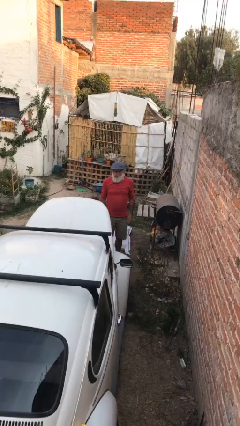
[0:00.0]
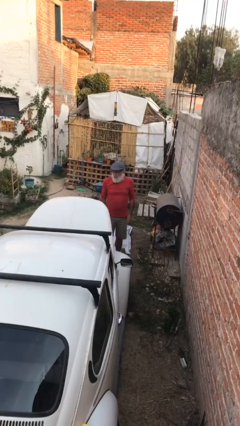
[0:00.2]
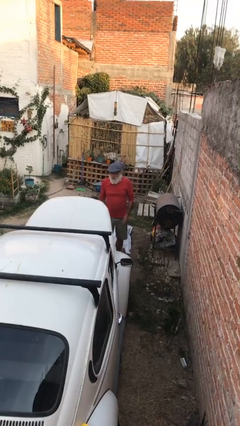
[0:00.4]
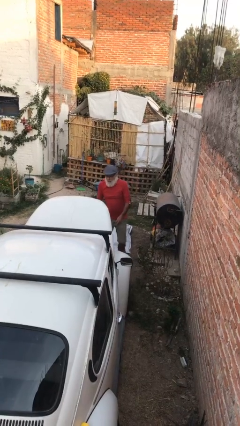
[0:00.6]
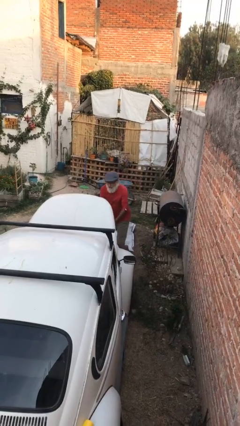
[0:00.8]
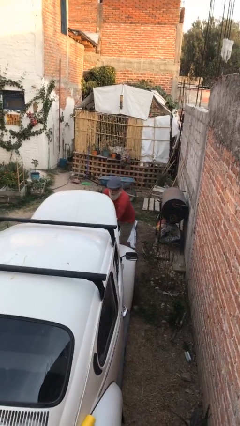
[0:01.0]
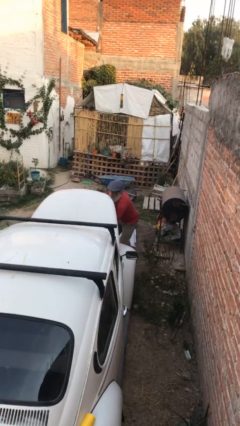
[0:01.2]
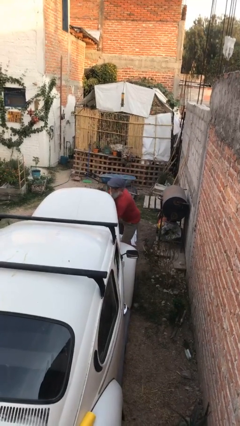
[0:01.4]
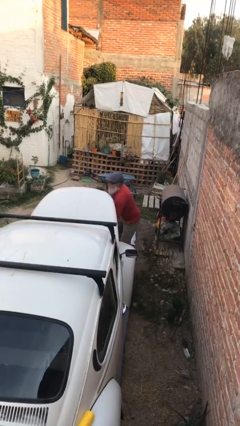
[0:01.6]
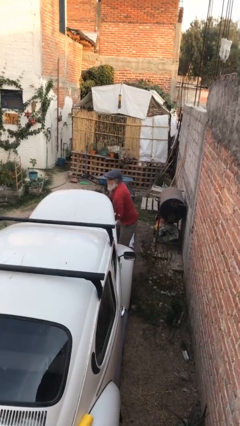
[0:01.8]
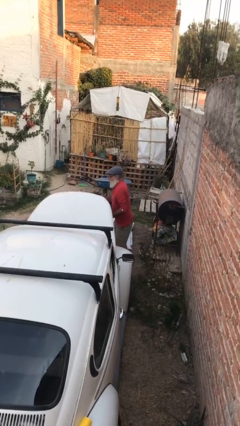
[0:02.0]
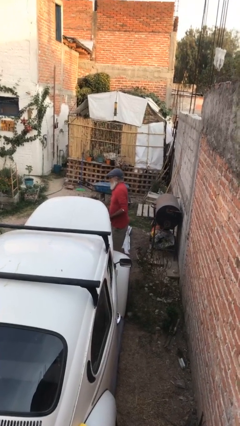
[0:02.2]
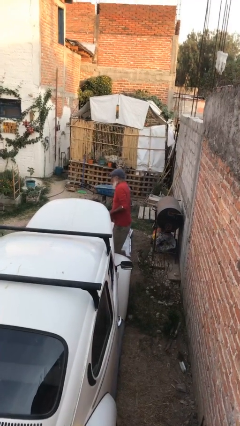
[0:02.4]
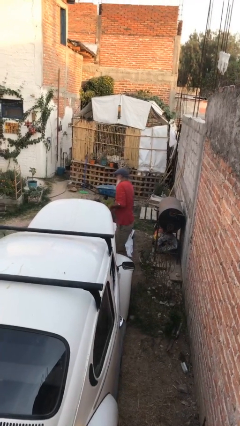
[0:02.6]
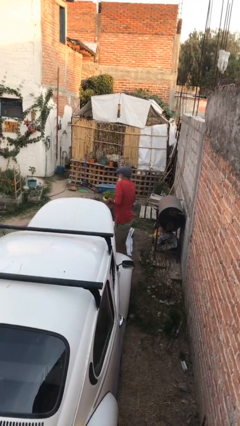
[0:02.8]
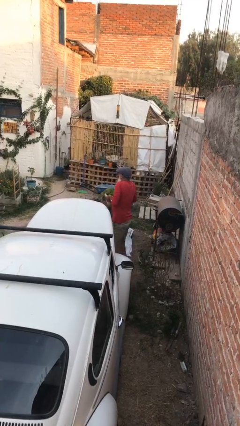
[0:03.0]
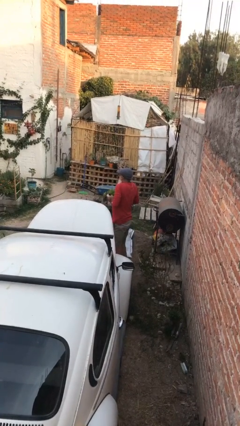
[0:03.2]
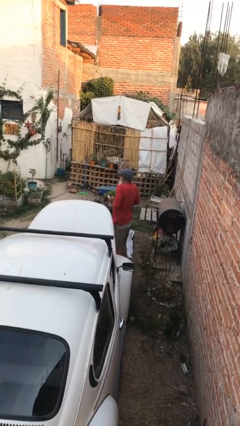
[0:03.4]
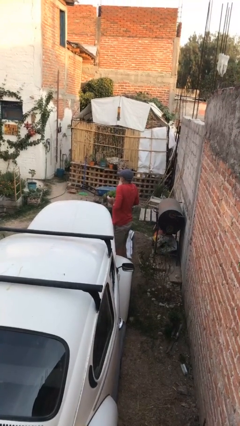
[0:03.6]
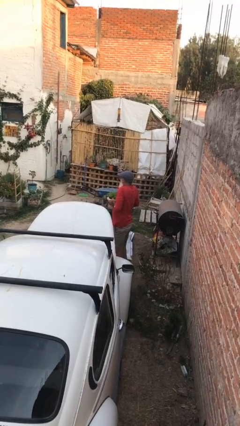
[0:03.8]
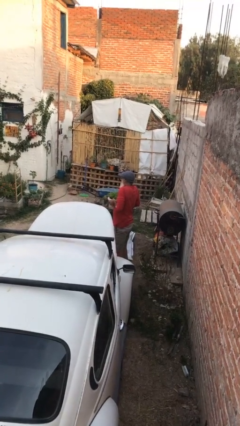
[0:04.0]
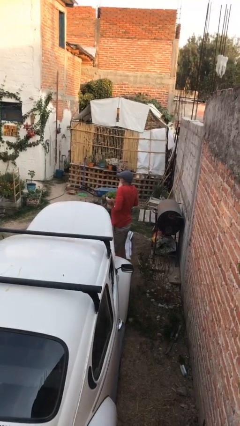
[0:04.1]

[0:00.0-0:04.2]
person unloads car

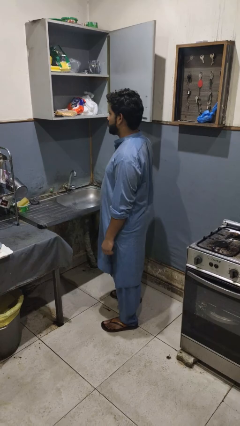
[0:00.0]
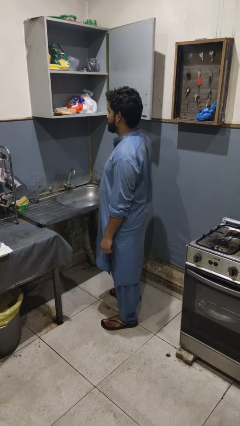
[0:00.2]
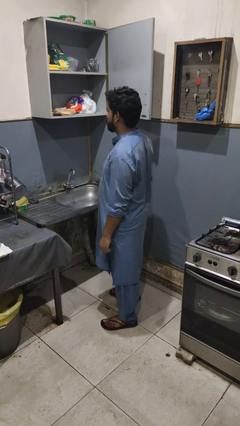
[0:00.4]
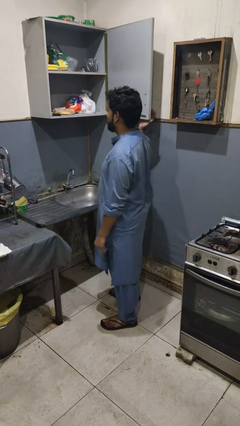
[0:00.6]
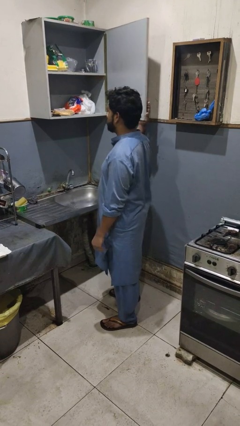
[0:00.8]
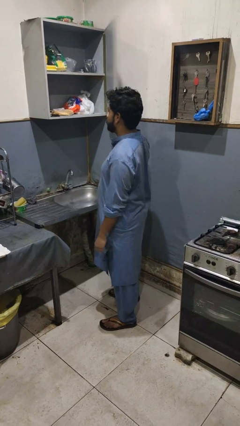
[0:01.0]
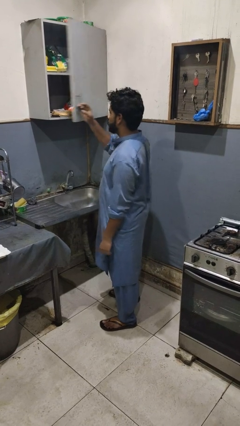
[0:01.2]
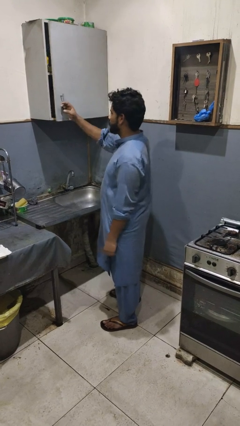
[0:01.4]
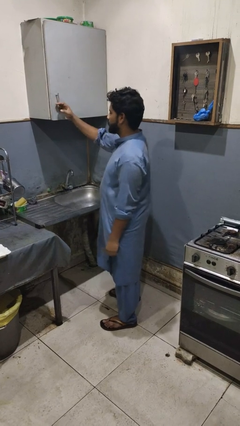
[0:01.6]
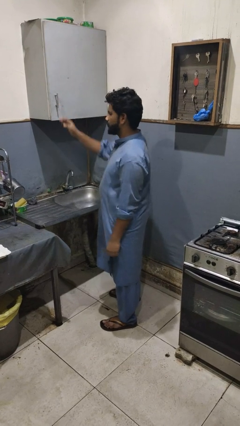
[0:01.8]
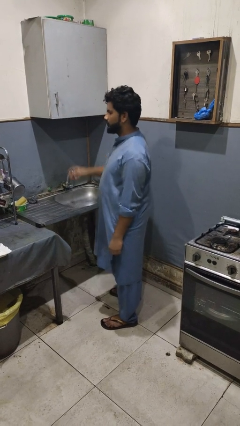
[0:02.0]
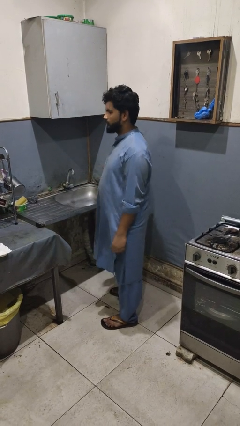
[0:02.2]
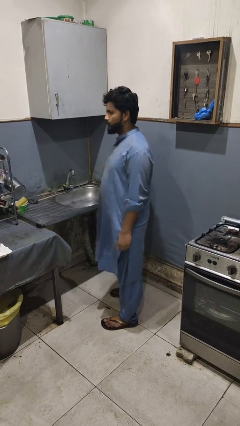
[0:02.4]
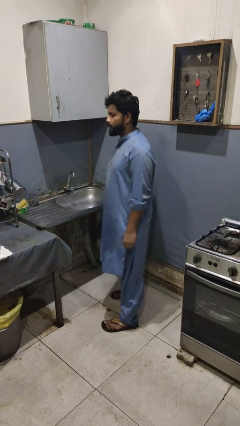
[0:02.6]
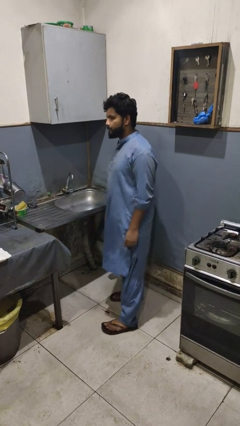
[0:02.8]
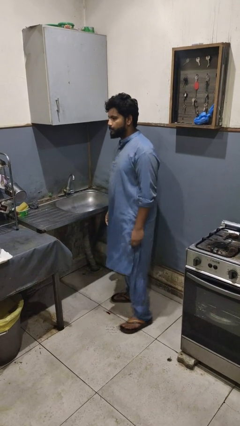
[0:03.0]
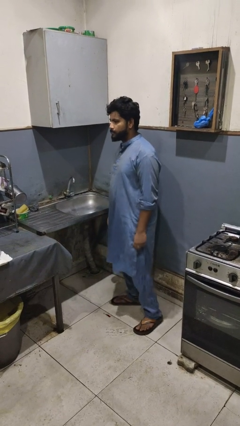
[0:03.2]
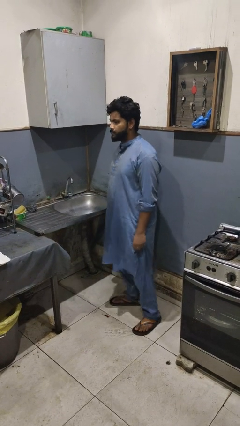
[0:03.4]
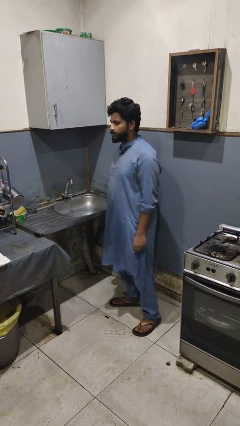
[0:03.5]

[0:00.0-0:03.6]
person closes cabinet

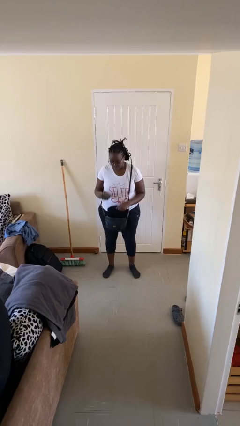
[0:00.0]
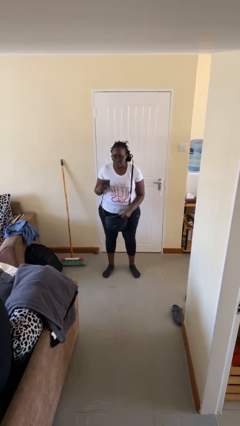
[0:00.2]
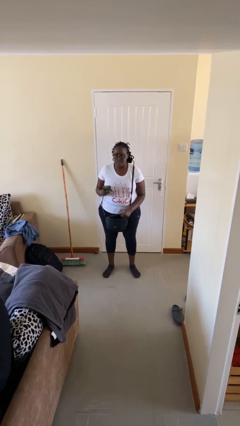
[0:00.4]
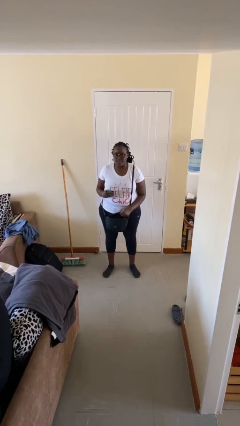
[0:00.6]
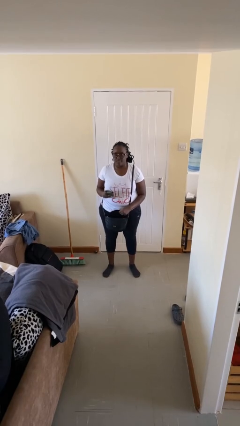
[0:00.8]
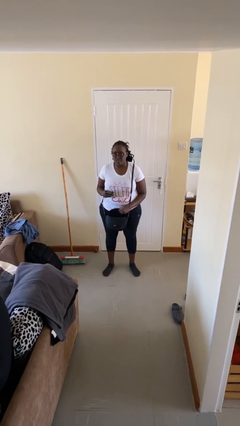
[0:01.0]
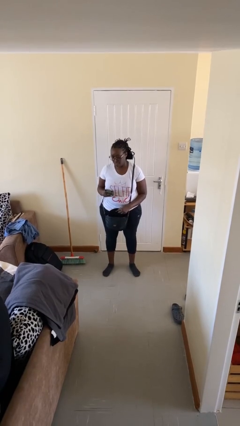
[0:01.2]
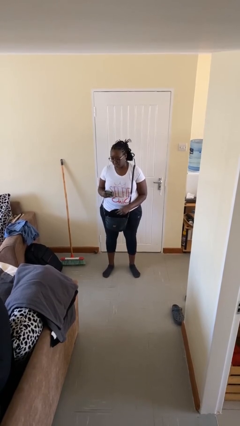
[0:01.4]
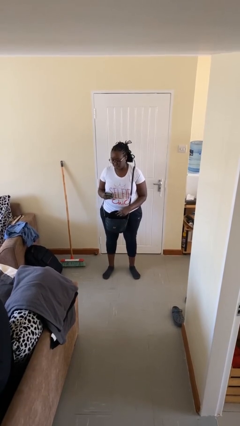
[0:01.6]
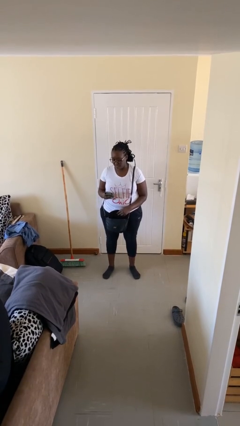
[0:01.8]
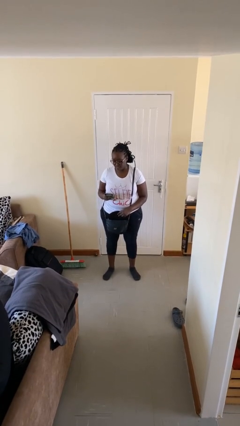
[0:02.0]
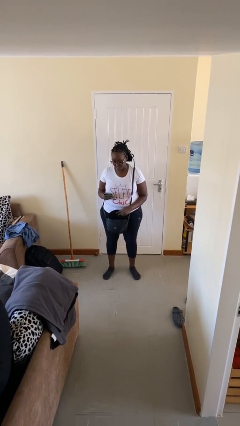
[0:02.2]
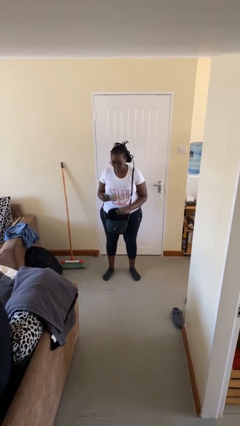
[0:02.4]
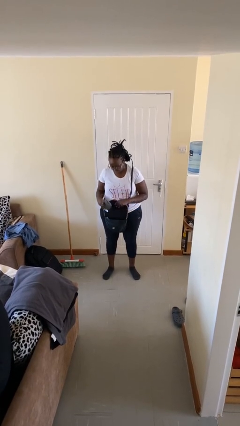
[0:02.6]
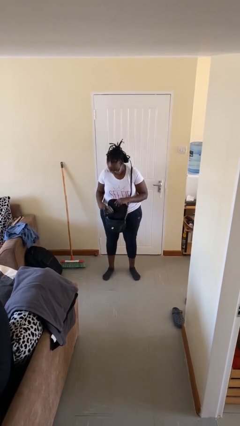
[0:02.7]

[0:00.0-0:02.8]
person takes object from purse

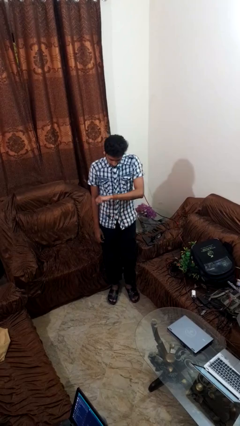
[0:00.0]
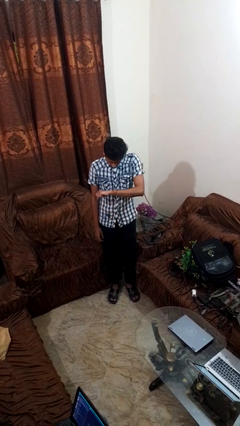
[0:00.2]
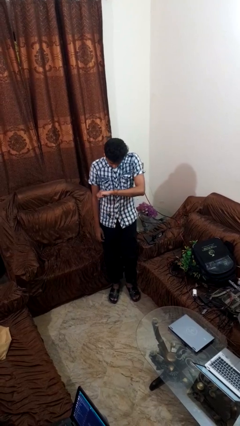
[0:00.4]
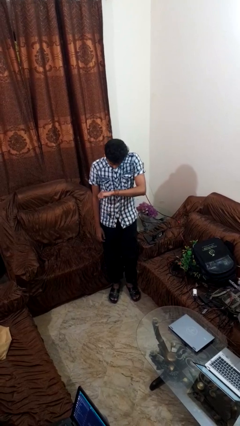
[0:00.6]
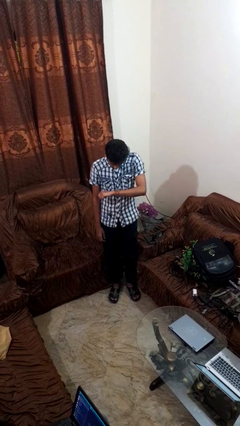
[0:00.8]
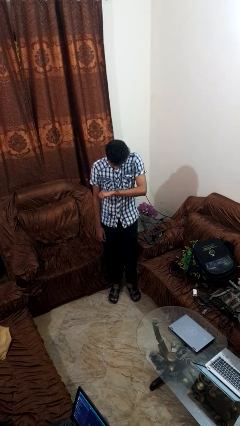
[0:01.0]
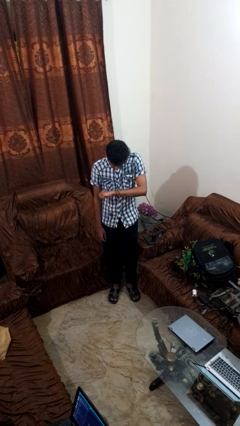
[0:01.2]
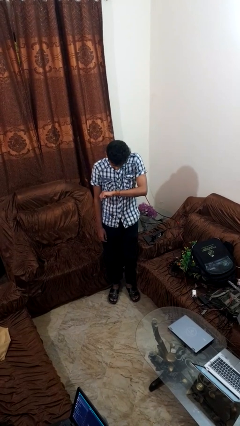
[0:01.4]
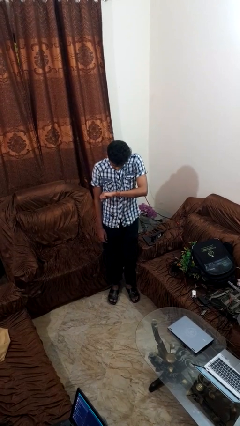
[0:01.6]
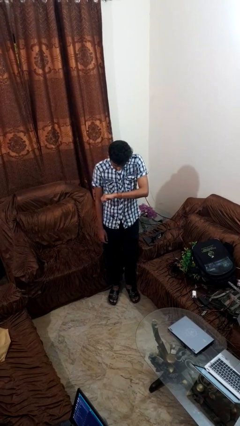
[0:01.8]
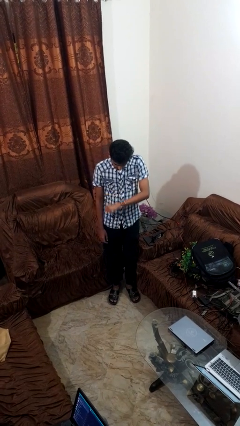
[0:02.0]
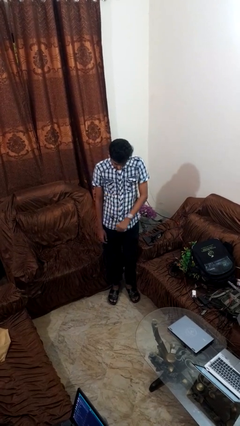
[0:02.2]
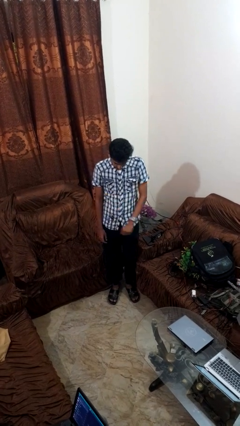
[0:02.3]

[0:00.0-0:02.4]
person looks at wristwatch

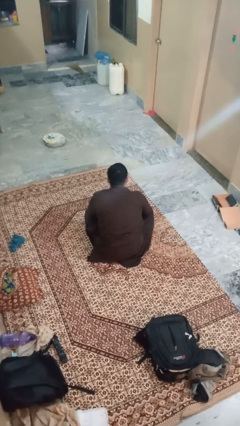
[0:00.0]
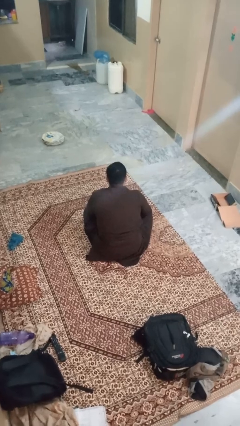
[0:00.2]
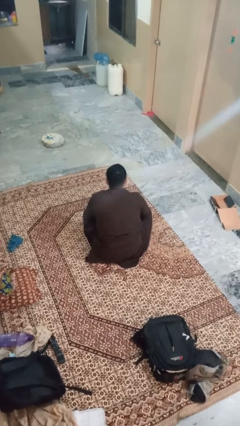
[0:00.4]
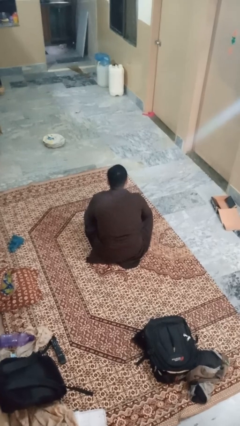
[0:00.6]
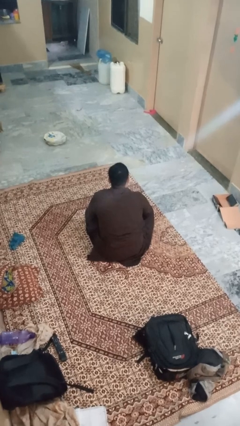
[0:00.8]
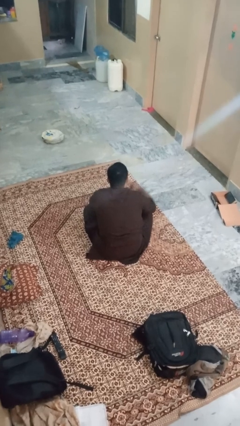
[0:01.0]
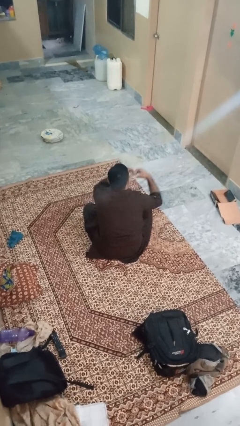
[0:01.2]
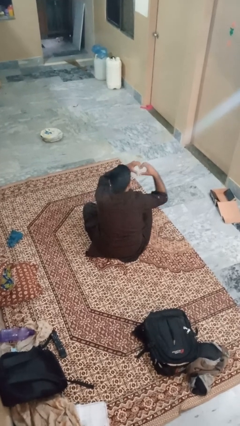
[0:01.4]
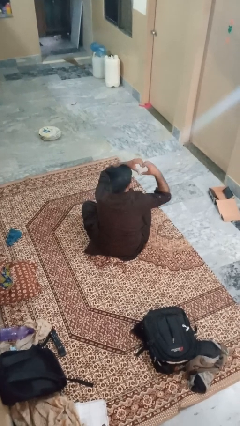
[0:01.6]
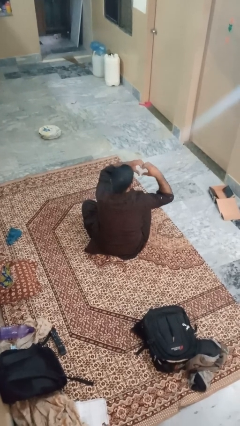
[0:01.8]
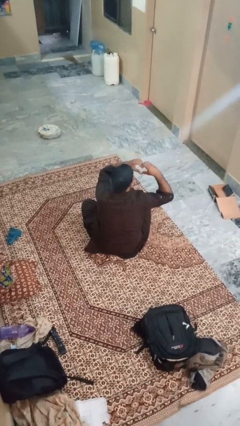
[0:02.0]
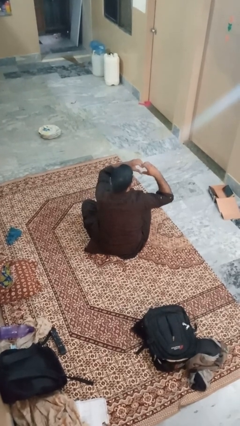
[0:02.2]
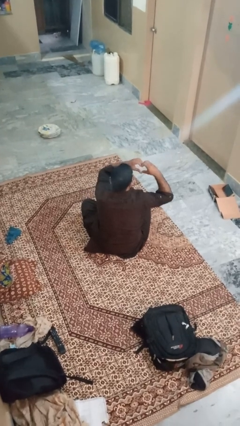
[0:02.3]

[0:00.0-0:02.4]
person gestures heart

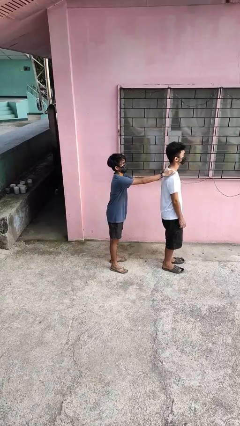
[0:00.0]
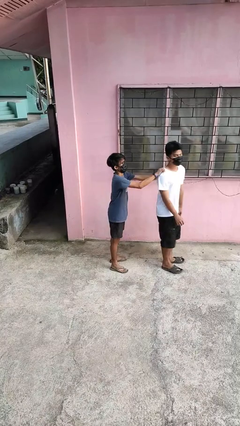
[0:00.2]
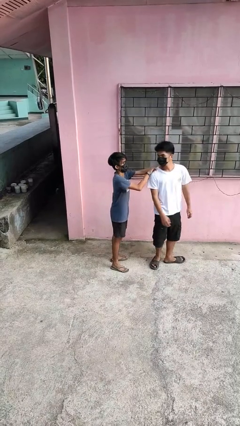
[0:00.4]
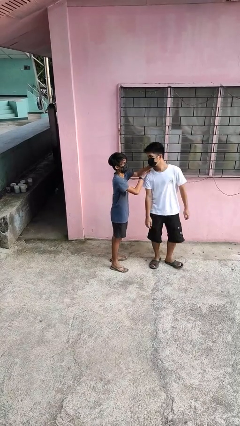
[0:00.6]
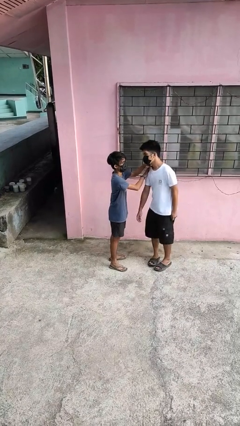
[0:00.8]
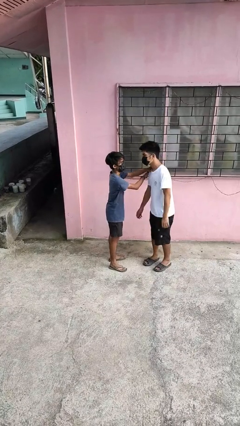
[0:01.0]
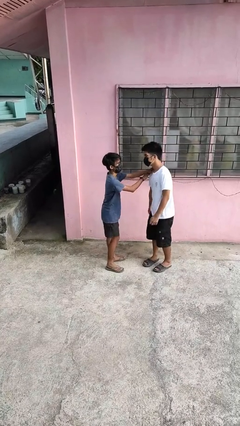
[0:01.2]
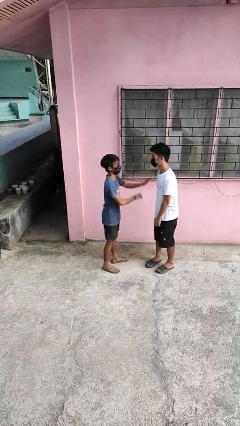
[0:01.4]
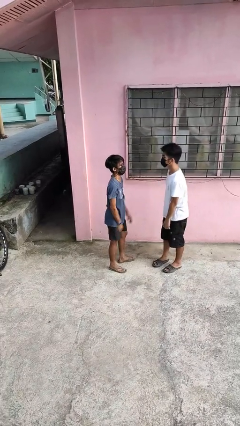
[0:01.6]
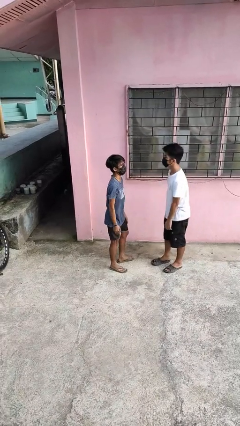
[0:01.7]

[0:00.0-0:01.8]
person spins person around

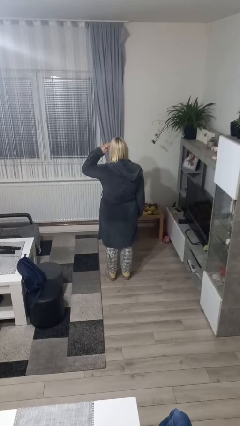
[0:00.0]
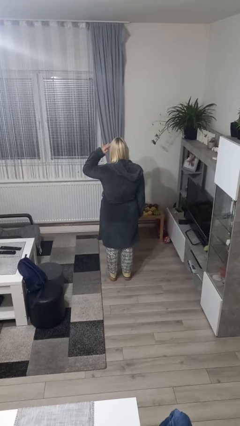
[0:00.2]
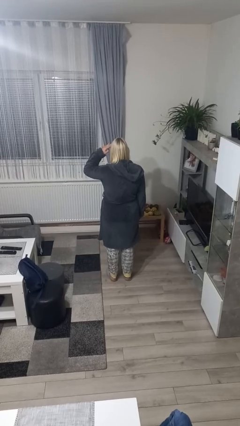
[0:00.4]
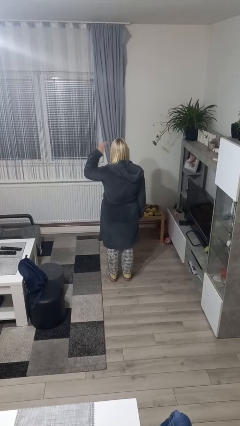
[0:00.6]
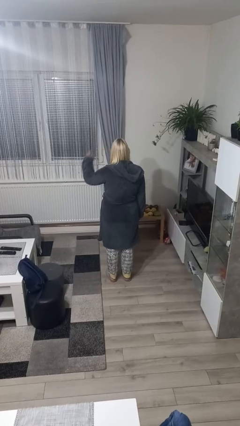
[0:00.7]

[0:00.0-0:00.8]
person salutes
